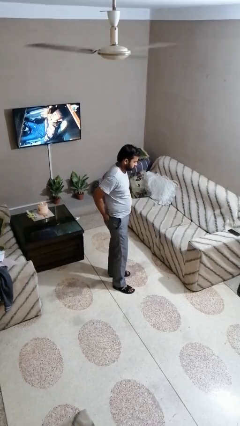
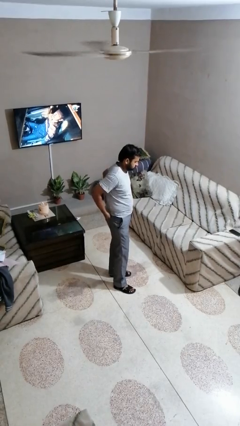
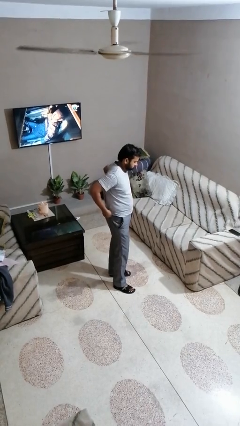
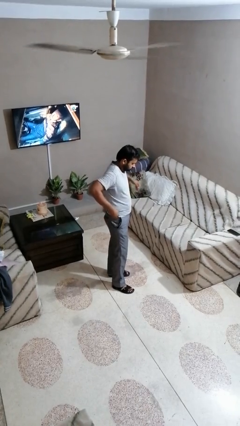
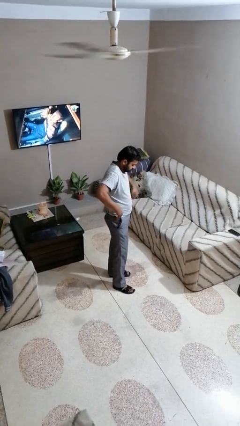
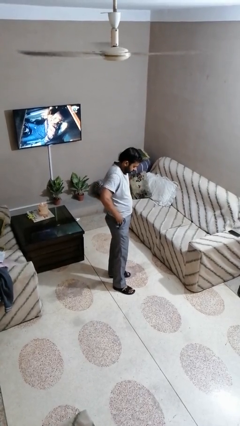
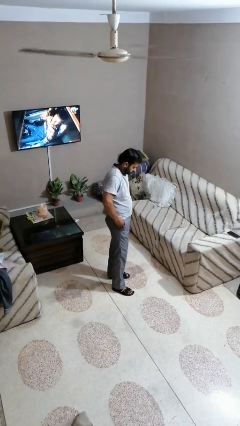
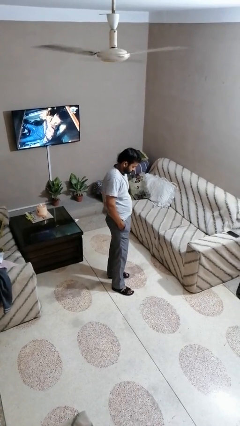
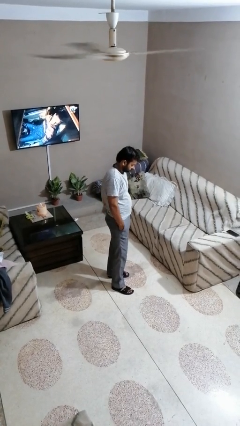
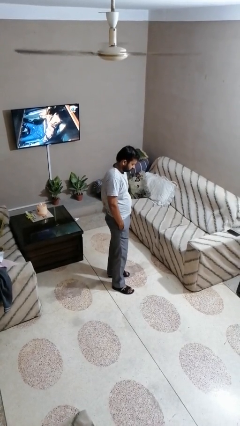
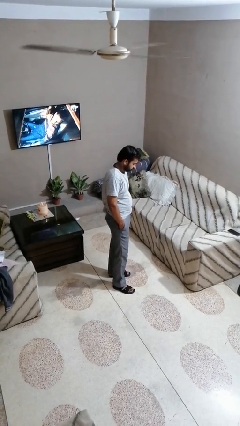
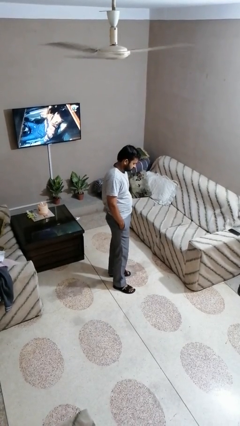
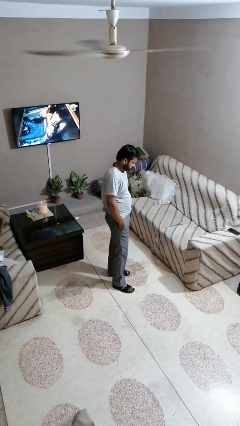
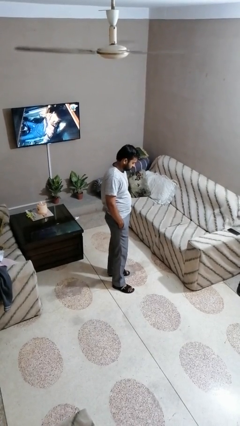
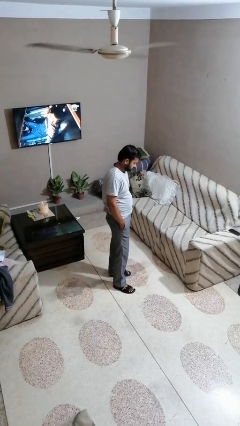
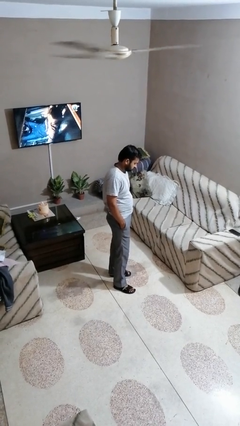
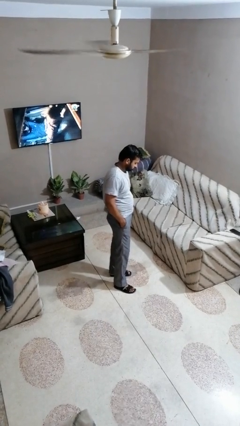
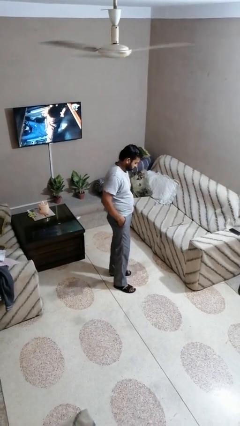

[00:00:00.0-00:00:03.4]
person puts hands in back pockets

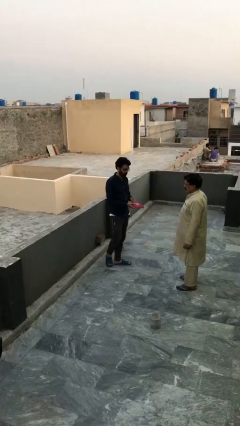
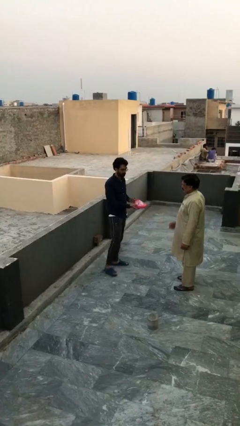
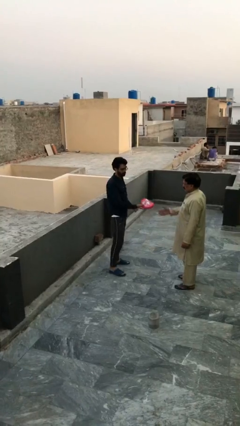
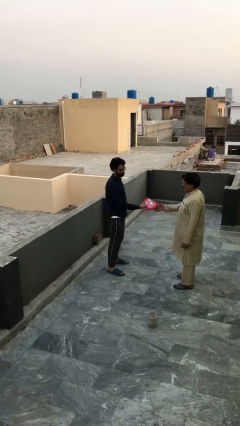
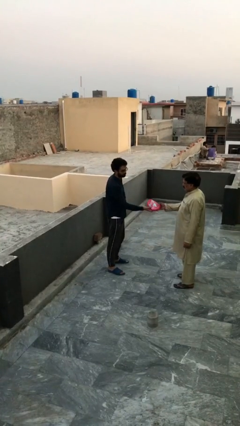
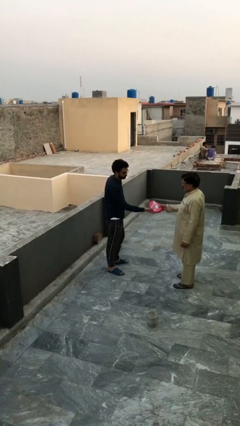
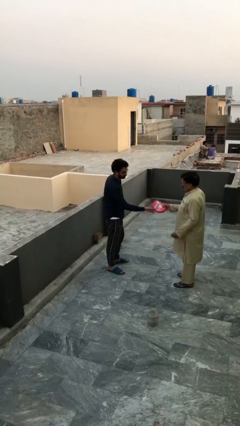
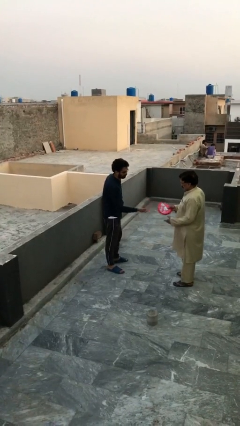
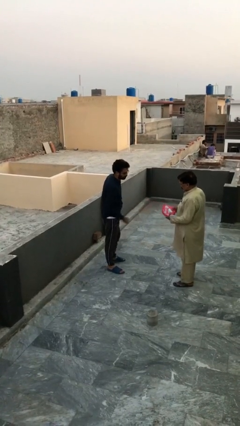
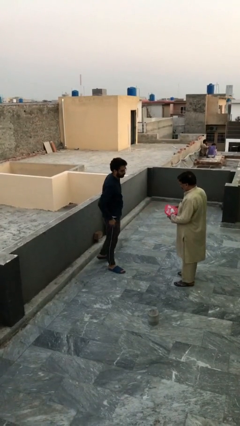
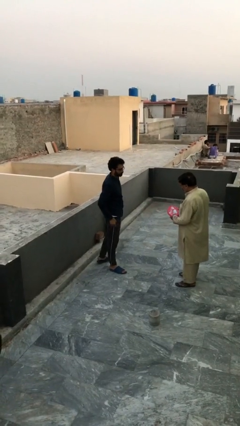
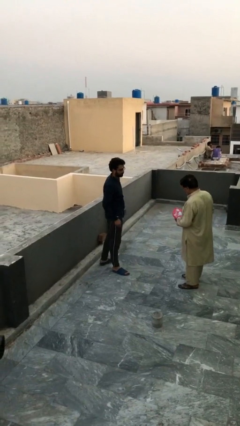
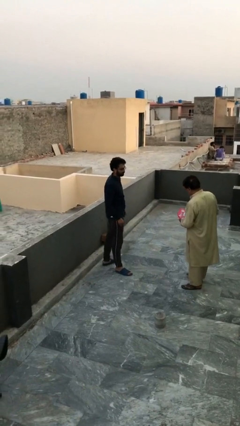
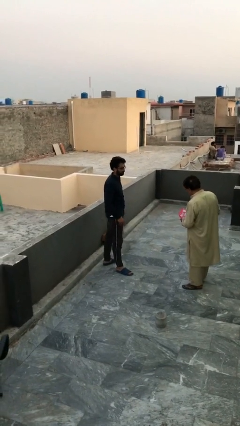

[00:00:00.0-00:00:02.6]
person transfers object to person

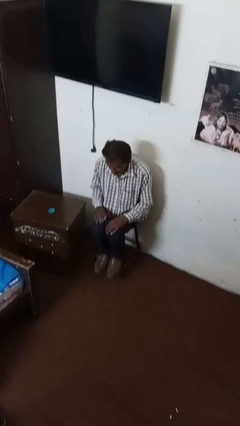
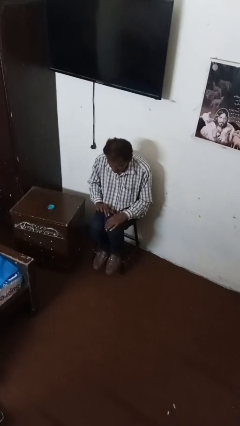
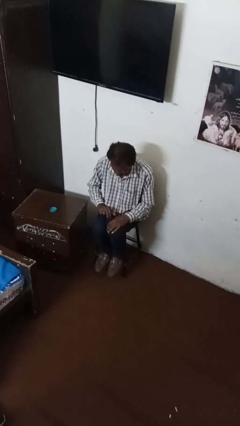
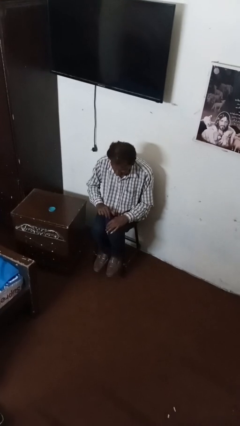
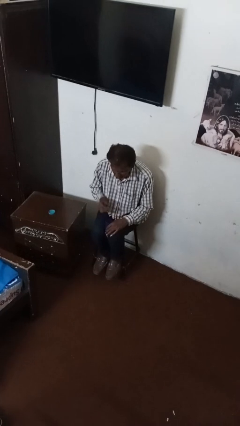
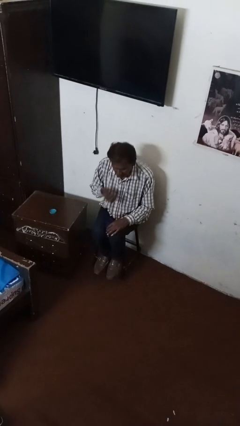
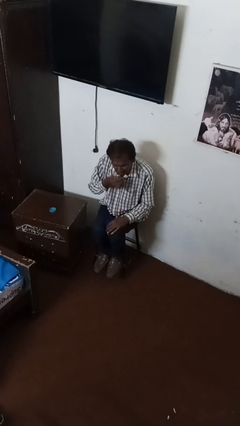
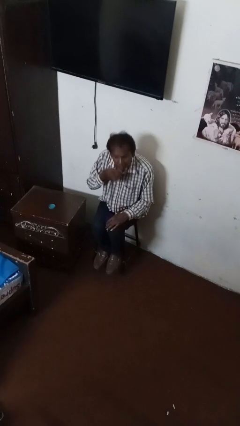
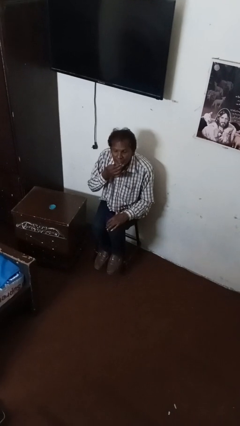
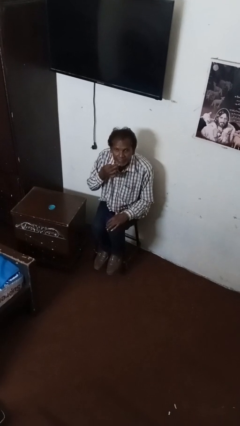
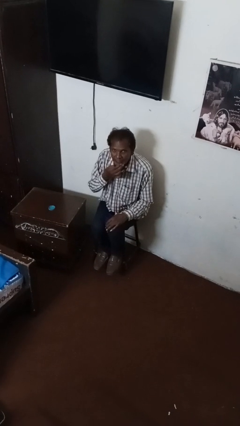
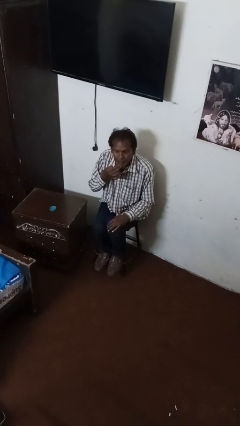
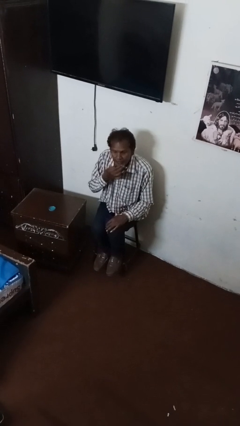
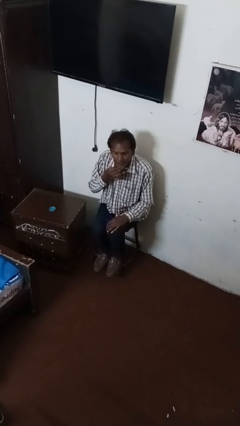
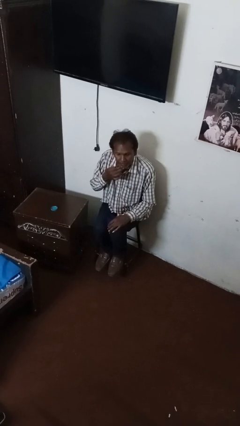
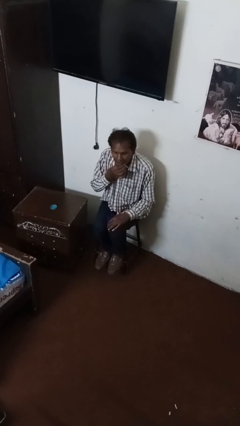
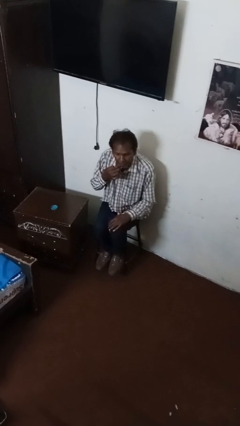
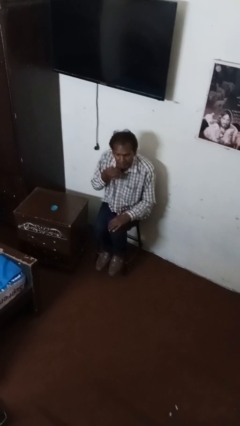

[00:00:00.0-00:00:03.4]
person strokes chin

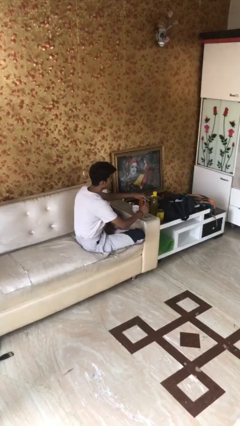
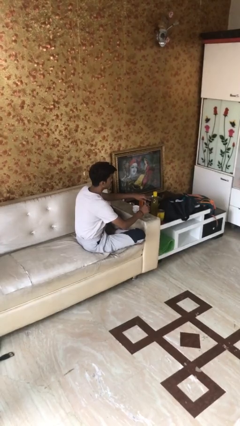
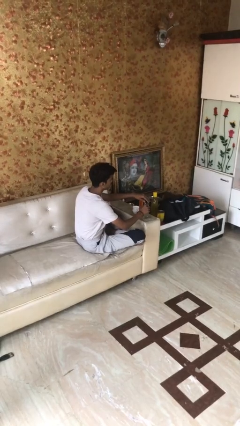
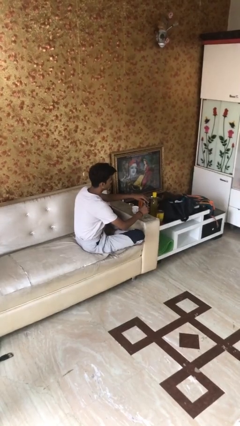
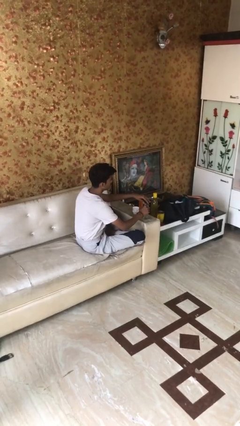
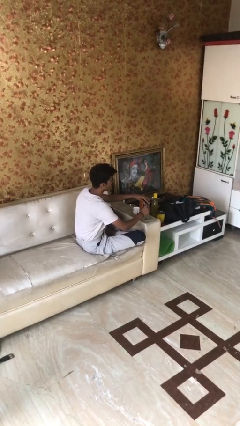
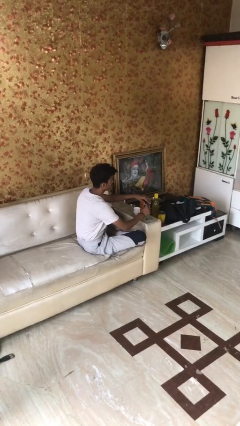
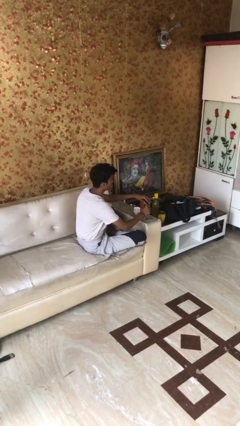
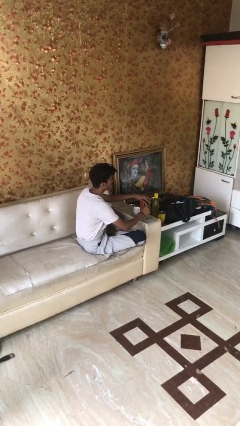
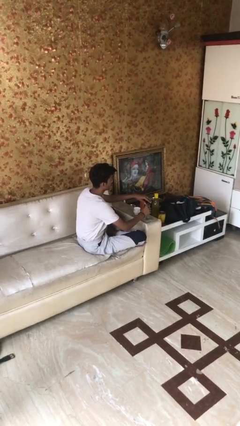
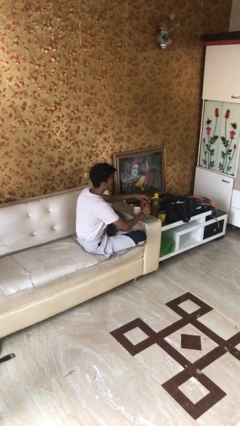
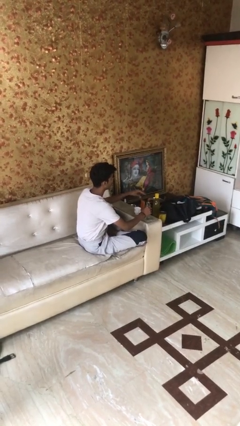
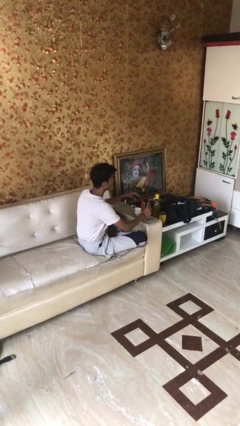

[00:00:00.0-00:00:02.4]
person unscrews lid from bottle

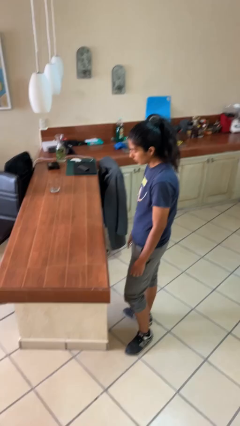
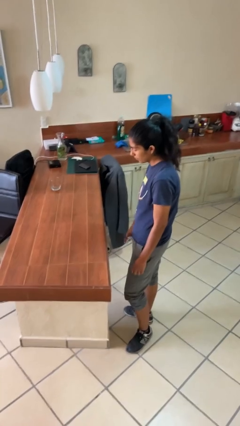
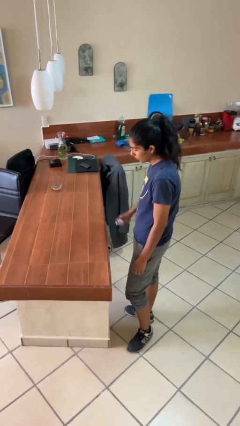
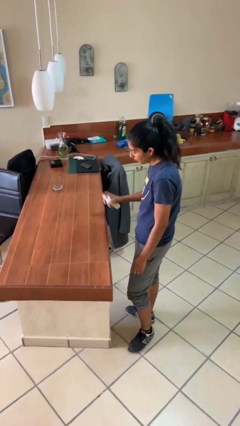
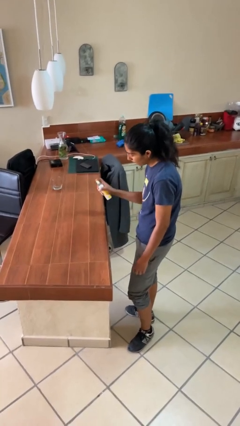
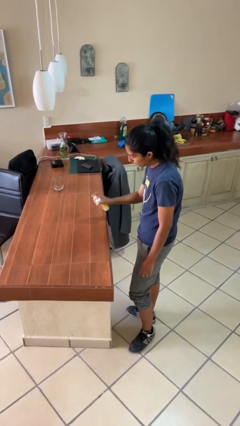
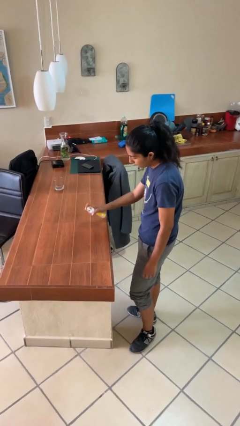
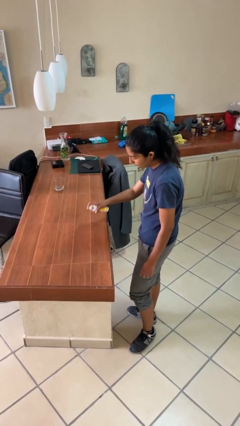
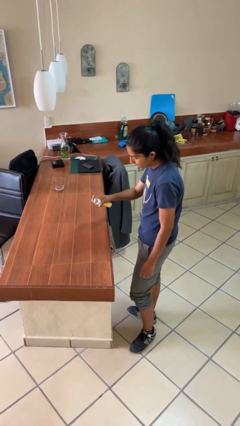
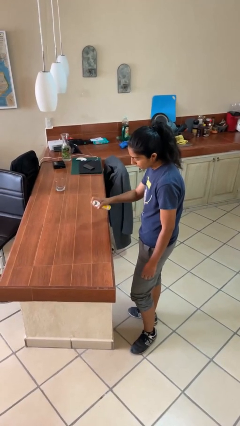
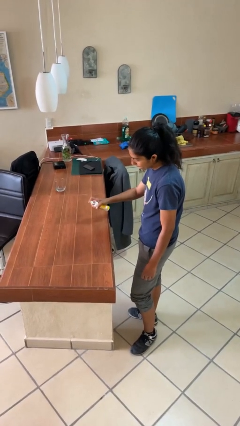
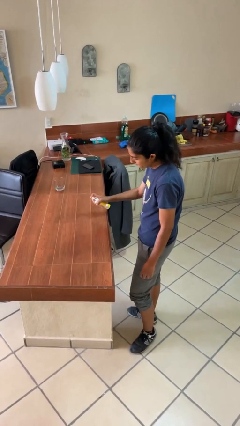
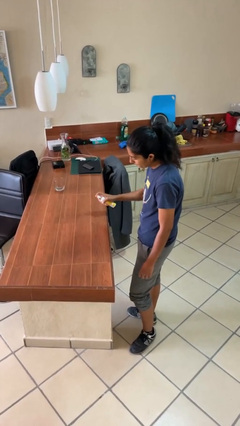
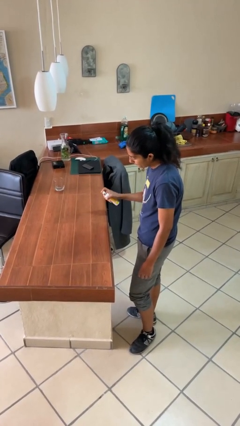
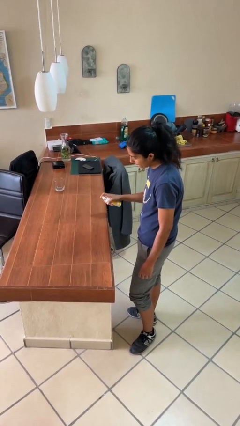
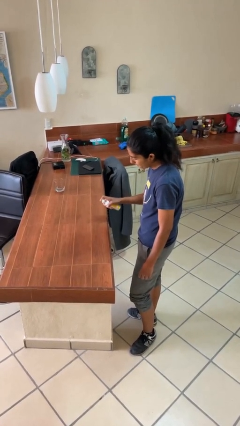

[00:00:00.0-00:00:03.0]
person sprays from bottle

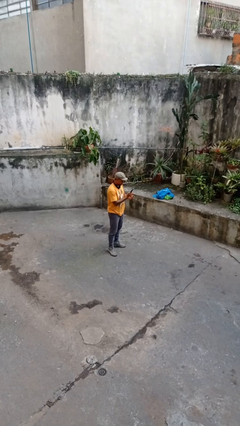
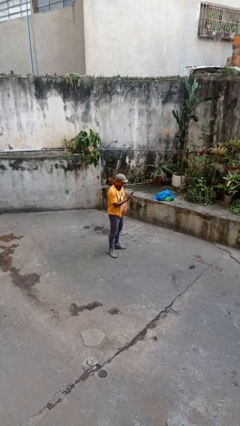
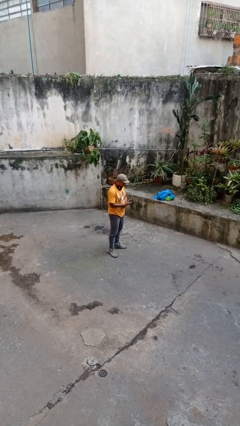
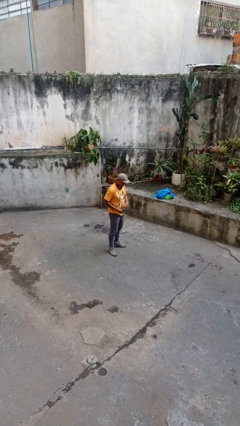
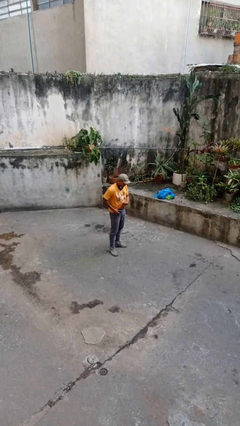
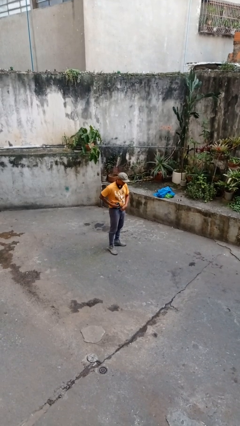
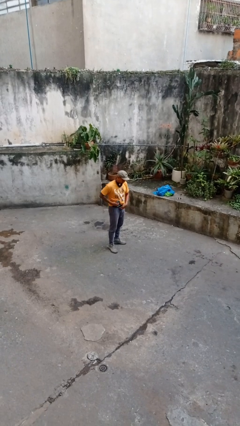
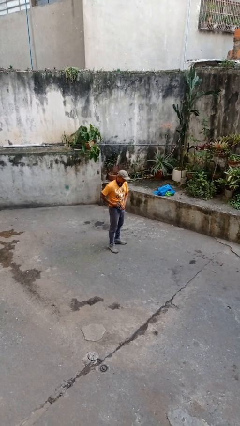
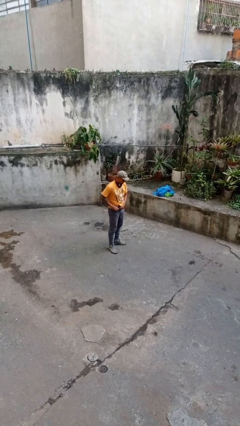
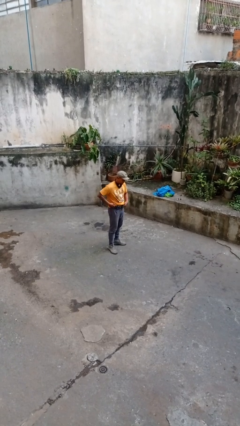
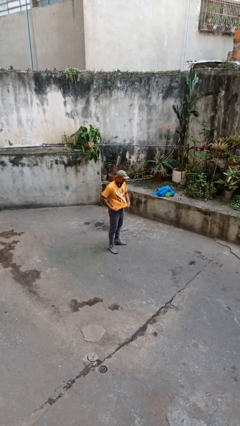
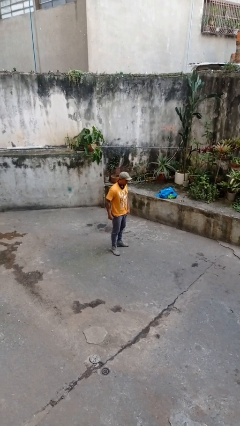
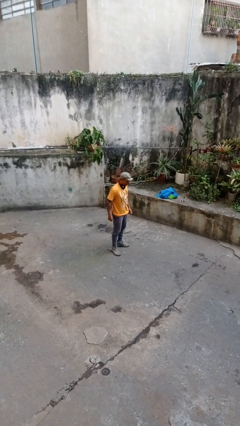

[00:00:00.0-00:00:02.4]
person puts phone into pocket
